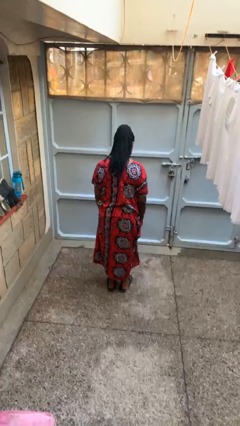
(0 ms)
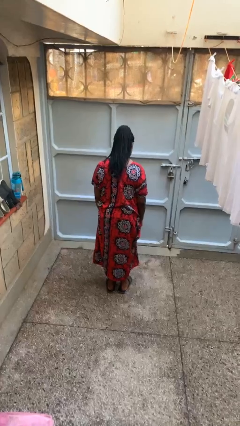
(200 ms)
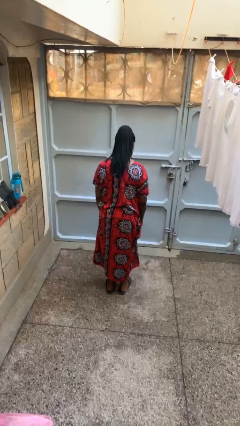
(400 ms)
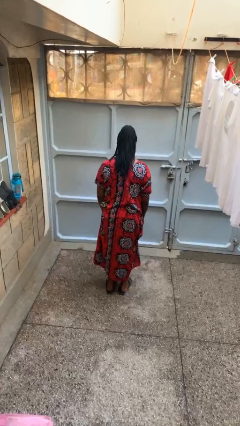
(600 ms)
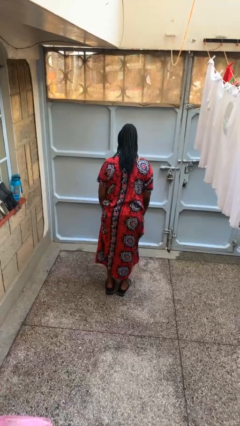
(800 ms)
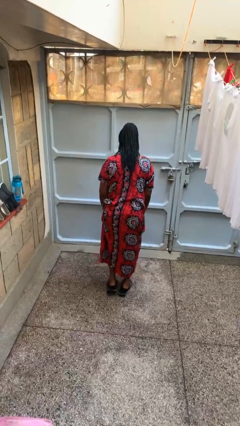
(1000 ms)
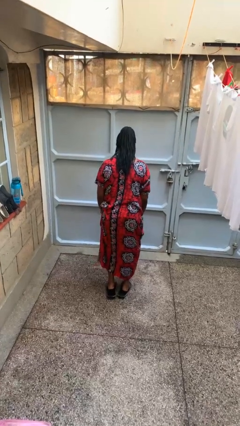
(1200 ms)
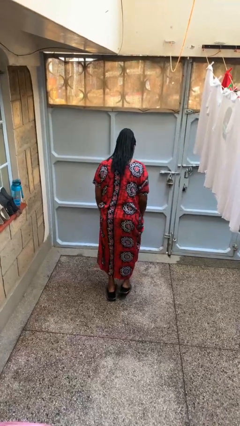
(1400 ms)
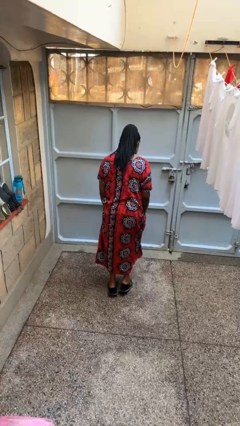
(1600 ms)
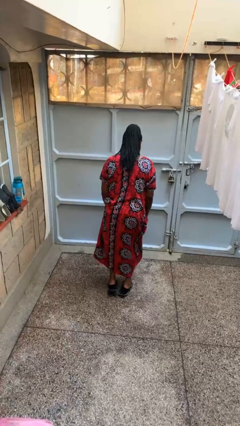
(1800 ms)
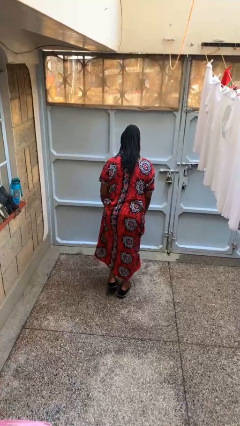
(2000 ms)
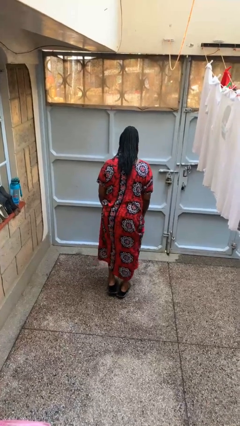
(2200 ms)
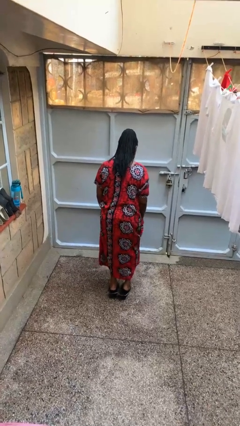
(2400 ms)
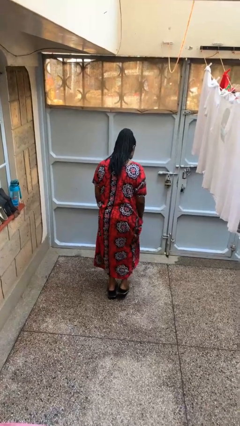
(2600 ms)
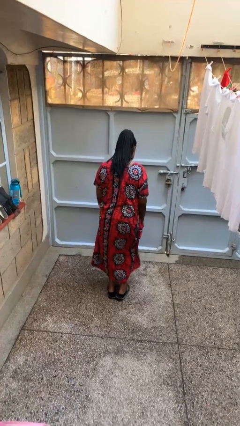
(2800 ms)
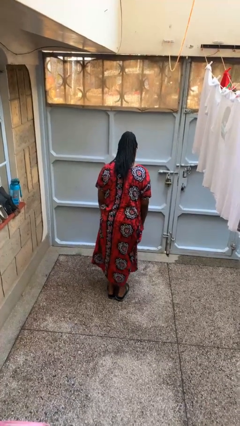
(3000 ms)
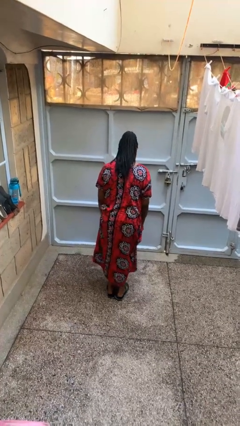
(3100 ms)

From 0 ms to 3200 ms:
person walks tiptoe

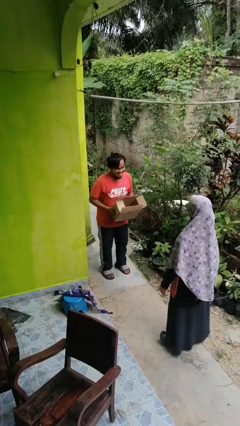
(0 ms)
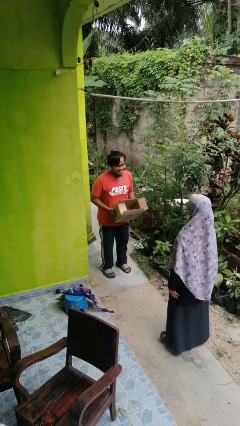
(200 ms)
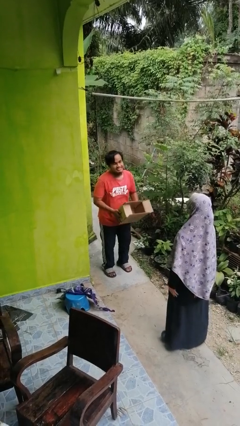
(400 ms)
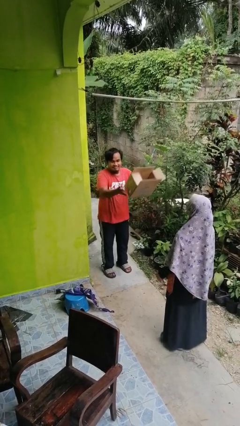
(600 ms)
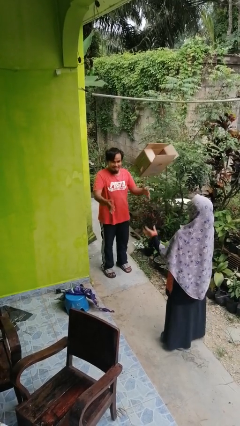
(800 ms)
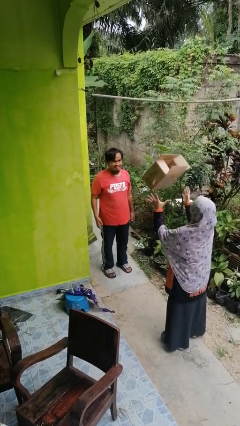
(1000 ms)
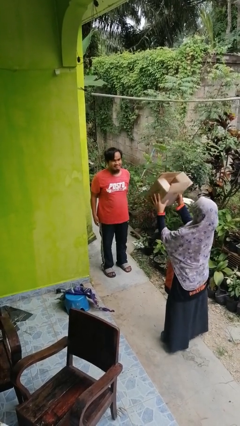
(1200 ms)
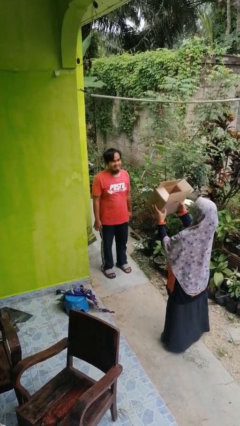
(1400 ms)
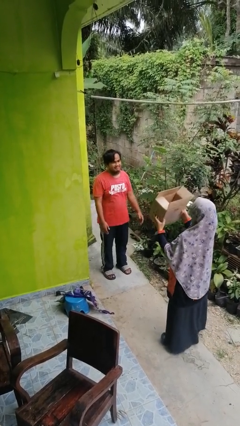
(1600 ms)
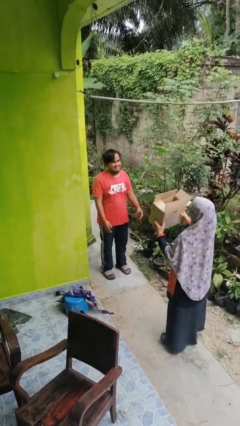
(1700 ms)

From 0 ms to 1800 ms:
person throws object to person

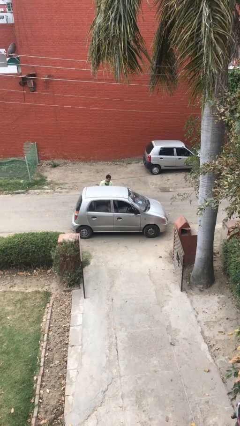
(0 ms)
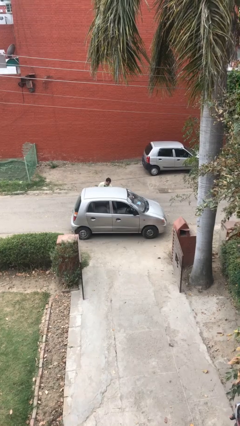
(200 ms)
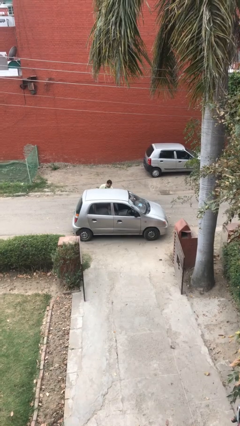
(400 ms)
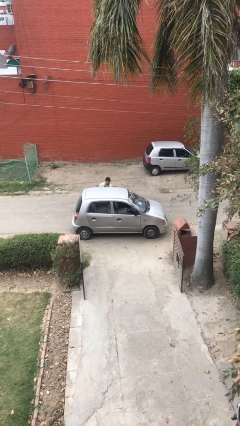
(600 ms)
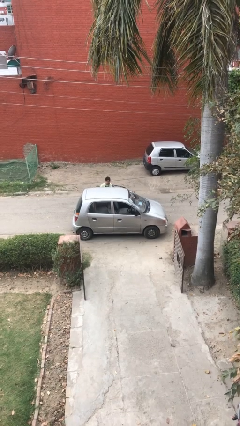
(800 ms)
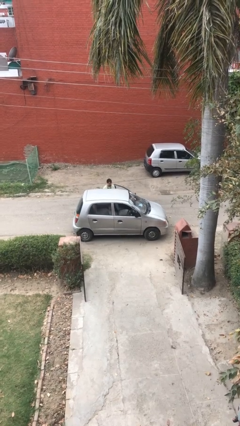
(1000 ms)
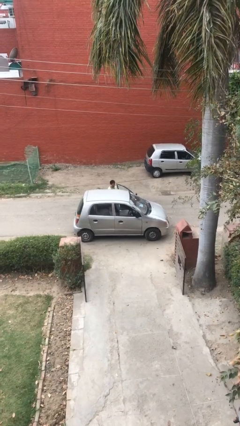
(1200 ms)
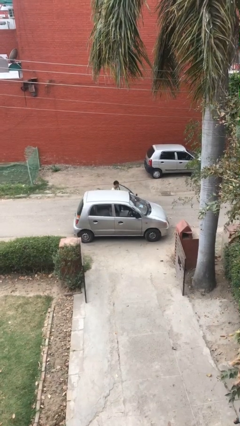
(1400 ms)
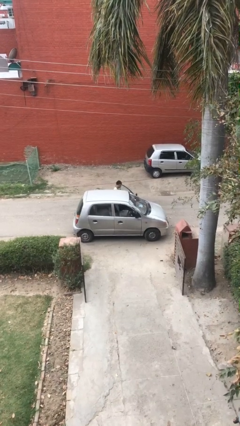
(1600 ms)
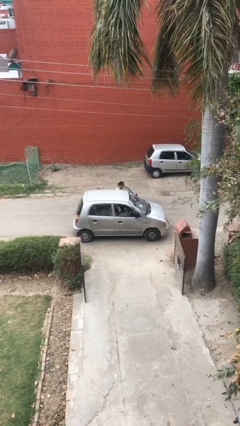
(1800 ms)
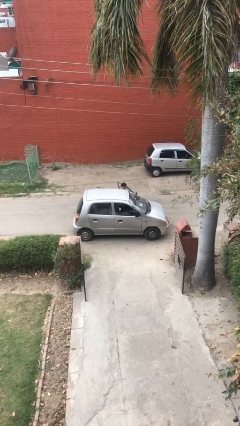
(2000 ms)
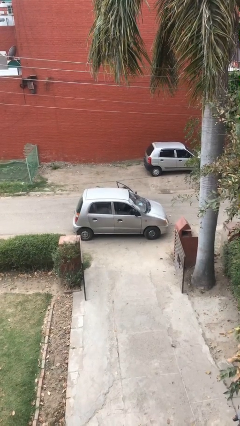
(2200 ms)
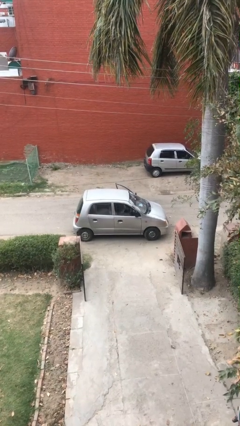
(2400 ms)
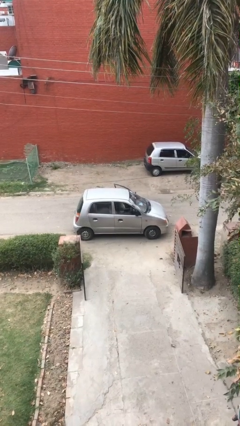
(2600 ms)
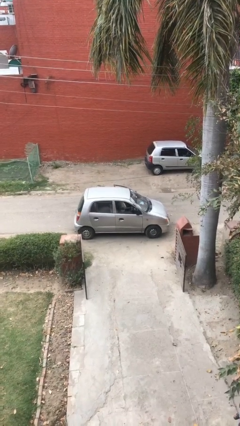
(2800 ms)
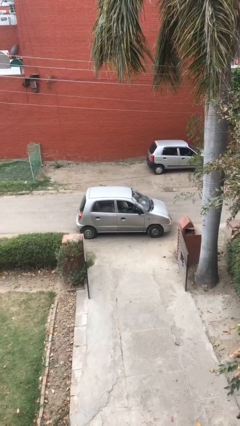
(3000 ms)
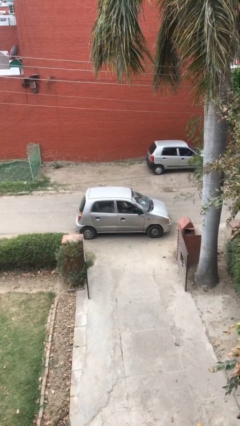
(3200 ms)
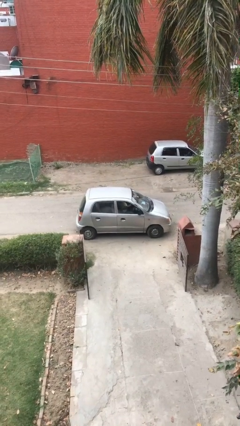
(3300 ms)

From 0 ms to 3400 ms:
car picks up person

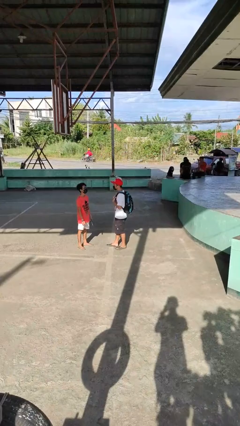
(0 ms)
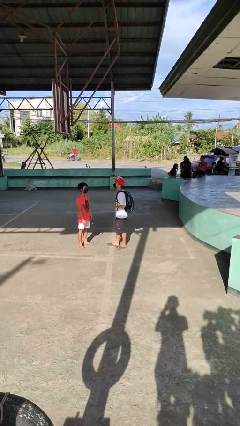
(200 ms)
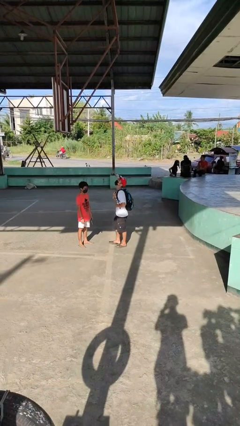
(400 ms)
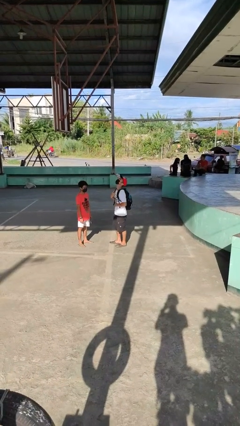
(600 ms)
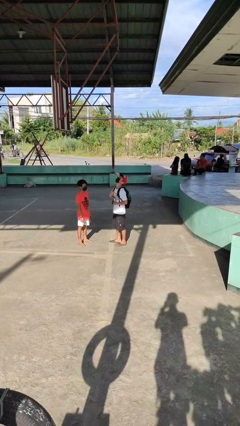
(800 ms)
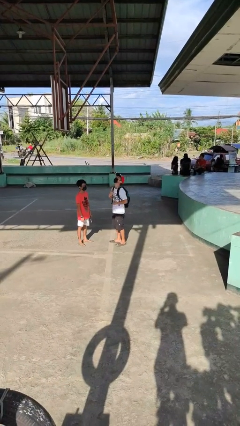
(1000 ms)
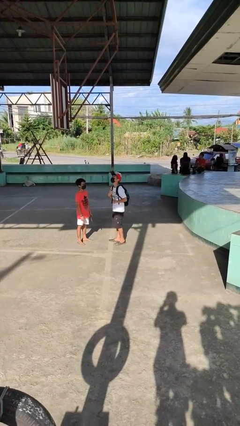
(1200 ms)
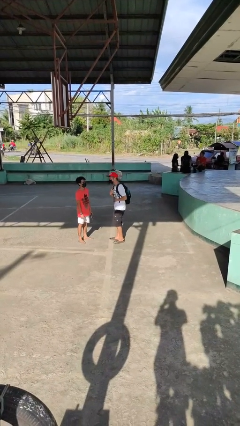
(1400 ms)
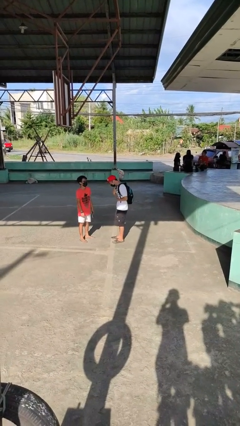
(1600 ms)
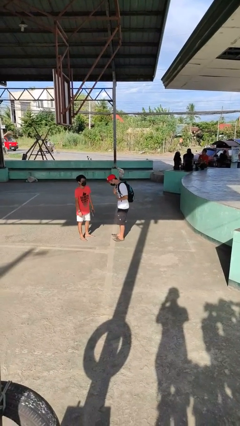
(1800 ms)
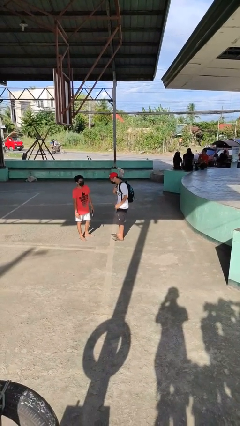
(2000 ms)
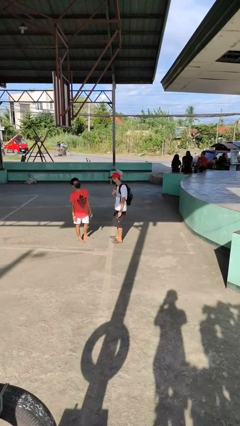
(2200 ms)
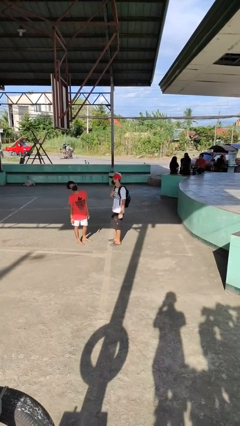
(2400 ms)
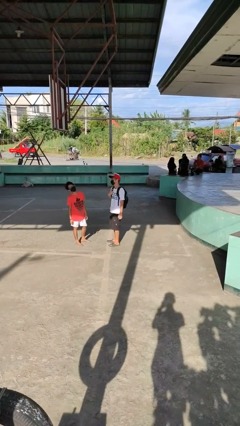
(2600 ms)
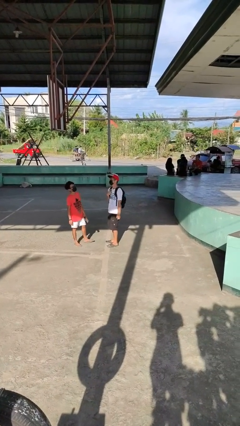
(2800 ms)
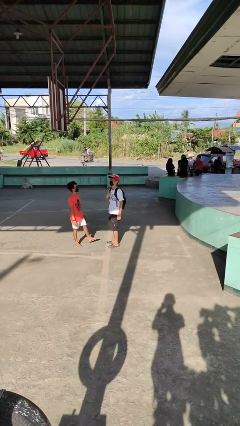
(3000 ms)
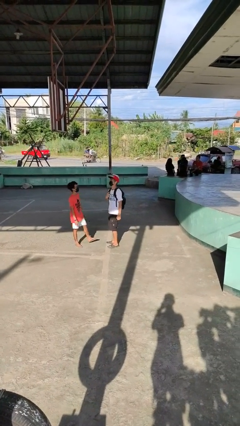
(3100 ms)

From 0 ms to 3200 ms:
person laughs with person

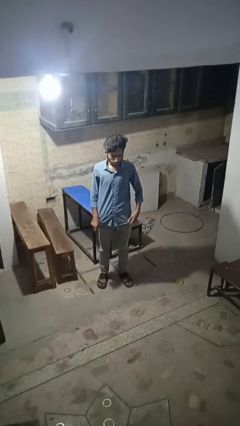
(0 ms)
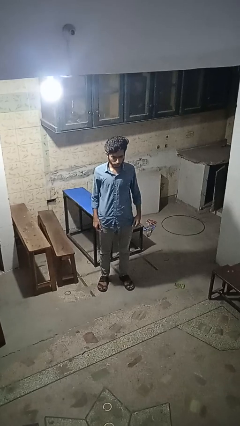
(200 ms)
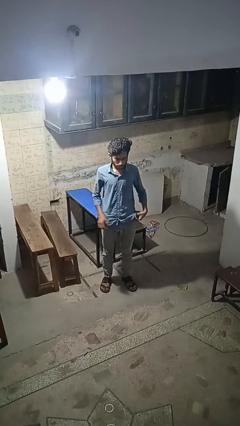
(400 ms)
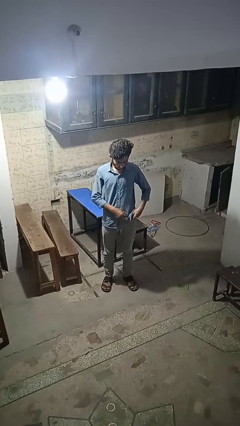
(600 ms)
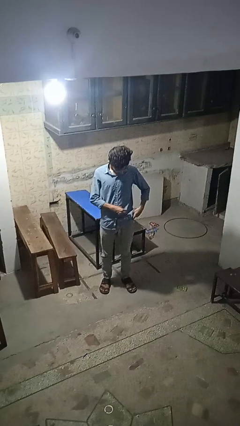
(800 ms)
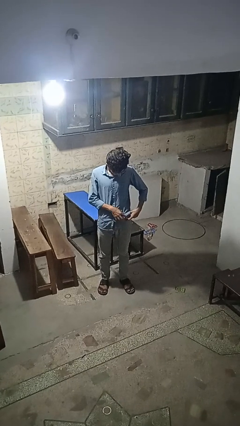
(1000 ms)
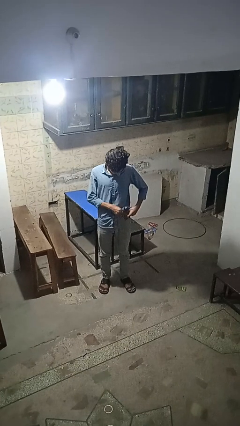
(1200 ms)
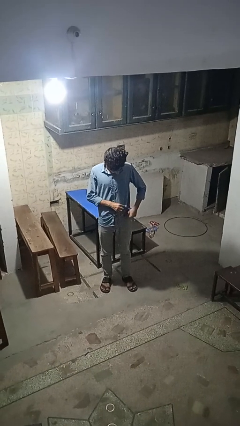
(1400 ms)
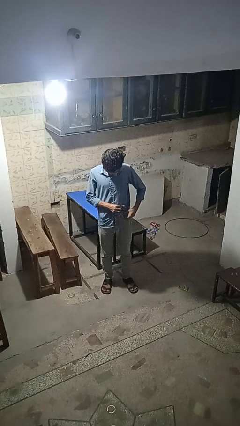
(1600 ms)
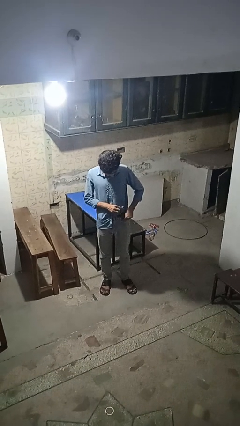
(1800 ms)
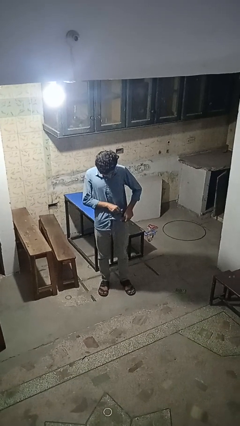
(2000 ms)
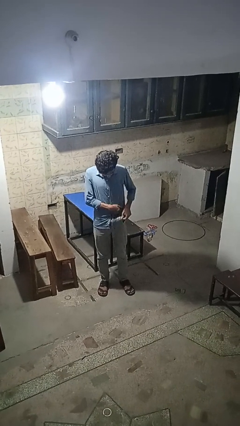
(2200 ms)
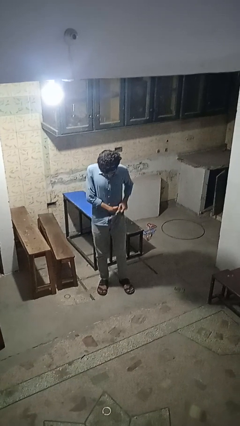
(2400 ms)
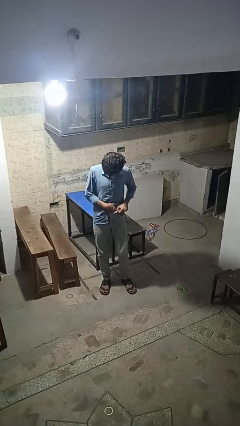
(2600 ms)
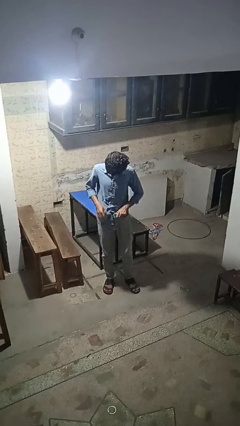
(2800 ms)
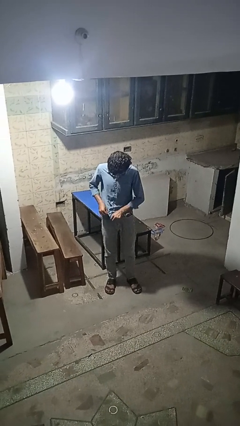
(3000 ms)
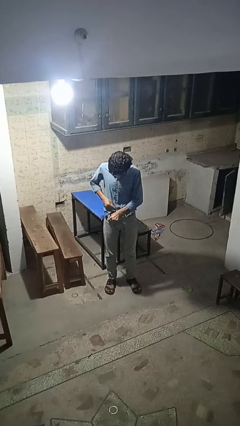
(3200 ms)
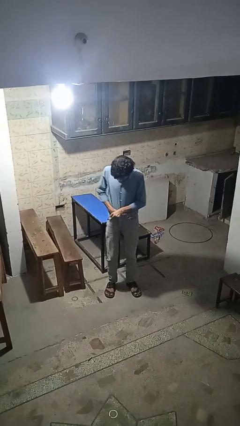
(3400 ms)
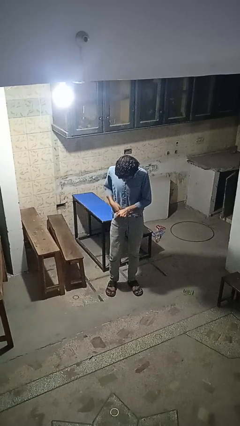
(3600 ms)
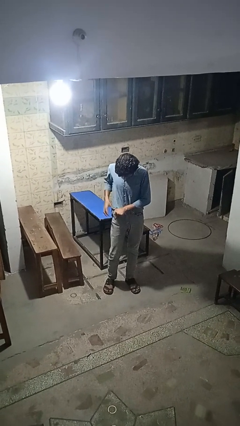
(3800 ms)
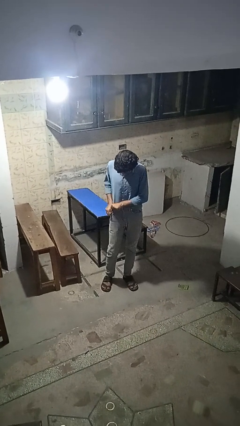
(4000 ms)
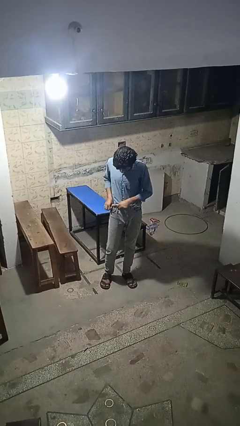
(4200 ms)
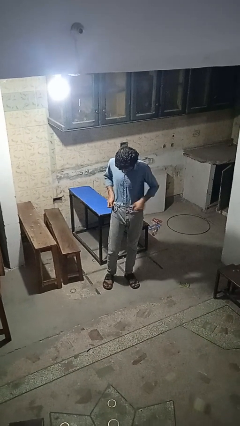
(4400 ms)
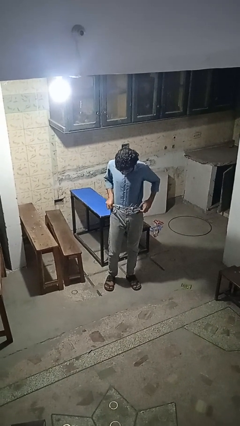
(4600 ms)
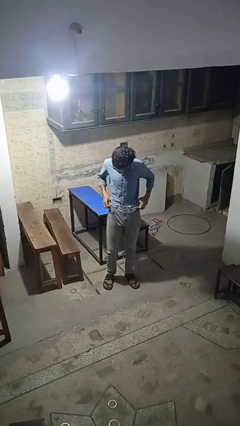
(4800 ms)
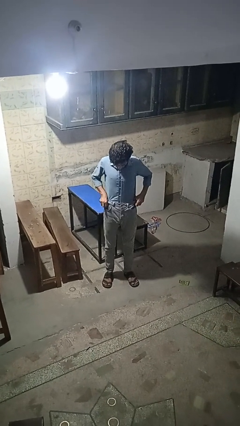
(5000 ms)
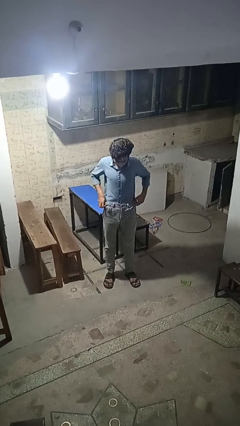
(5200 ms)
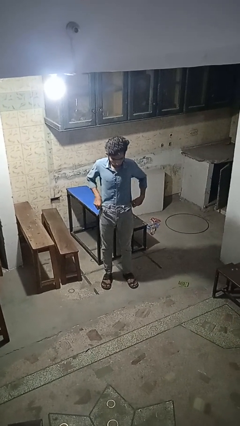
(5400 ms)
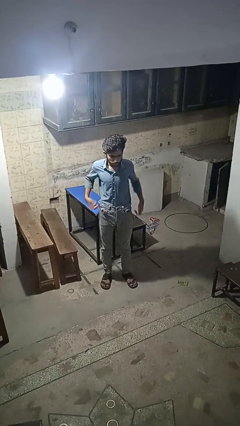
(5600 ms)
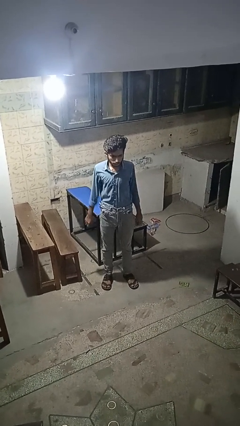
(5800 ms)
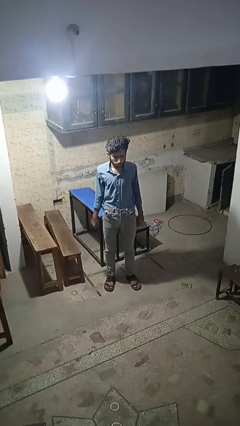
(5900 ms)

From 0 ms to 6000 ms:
person tucks in shirt
